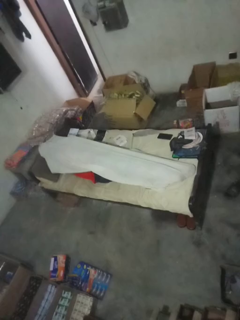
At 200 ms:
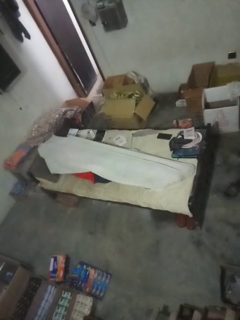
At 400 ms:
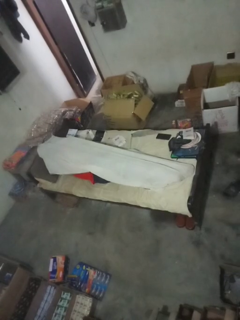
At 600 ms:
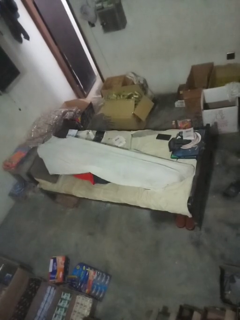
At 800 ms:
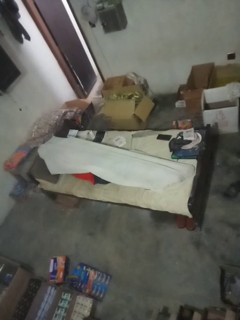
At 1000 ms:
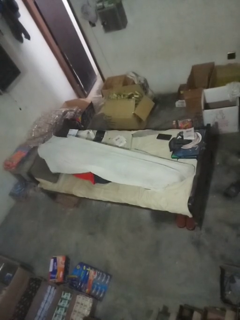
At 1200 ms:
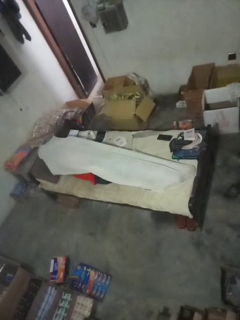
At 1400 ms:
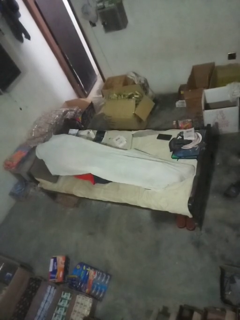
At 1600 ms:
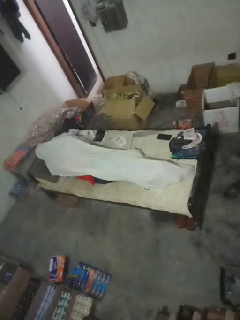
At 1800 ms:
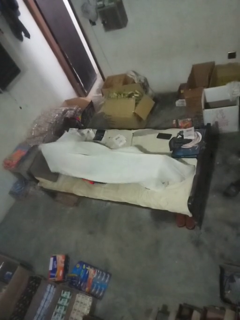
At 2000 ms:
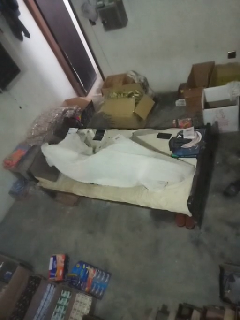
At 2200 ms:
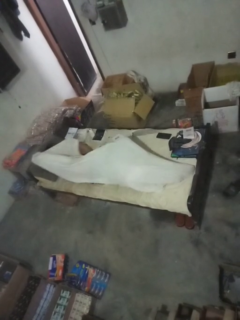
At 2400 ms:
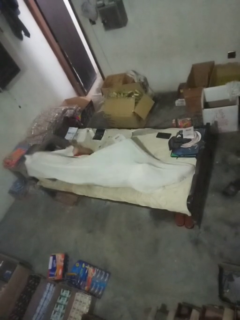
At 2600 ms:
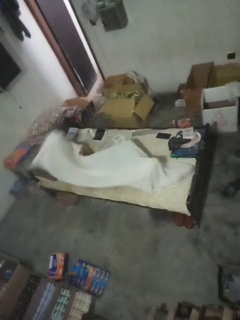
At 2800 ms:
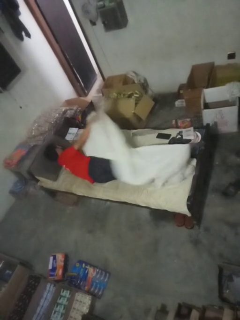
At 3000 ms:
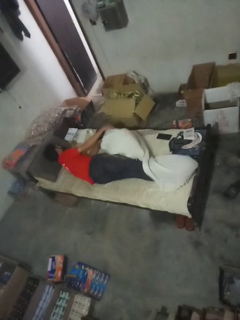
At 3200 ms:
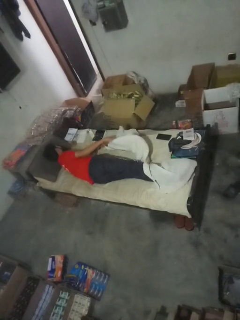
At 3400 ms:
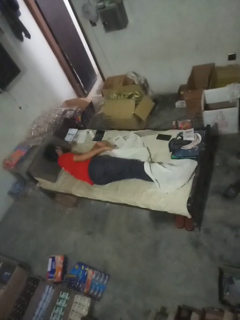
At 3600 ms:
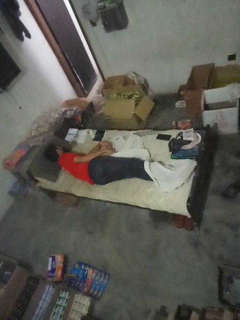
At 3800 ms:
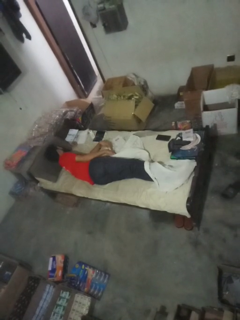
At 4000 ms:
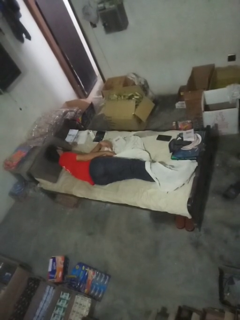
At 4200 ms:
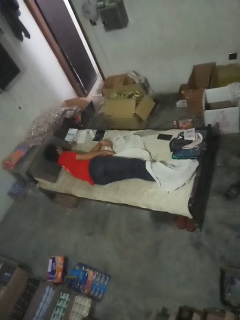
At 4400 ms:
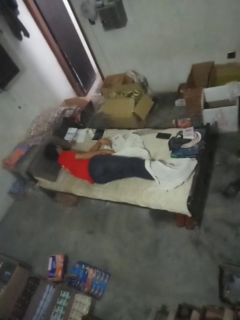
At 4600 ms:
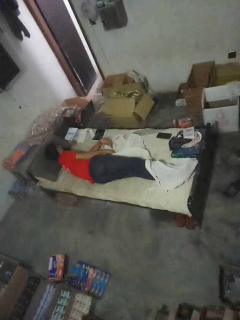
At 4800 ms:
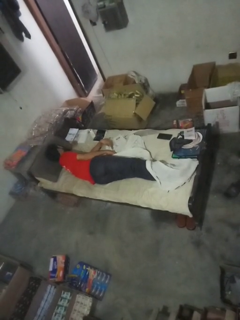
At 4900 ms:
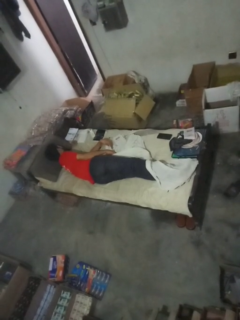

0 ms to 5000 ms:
person uncovers with bedsheets

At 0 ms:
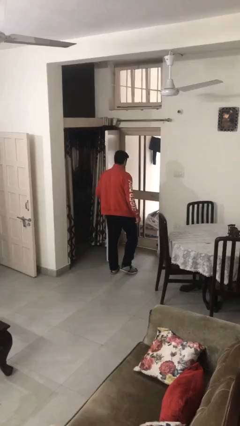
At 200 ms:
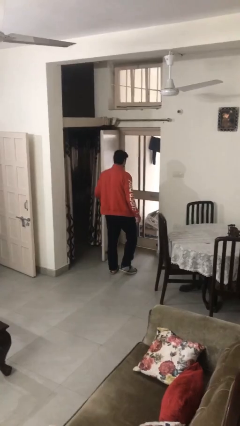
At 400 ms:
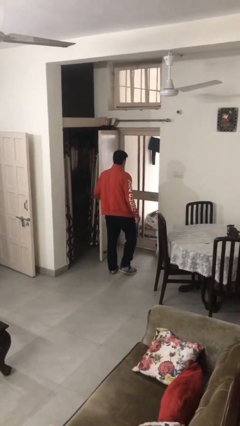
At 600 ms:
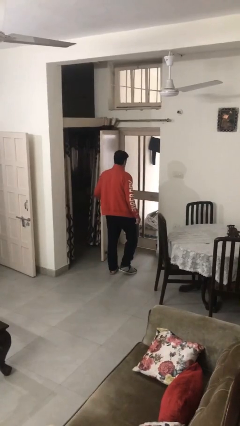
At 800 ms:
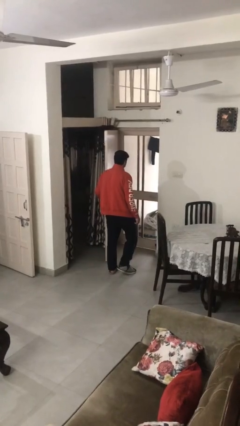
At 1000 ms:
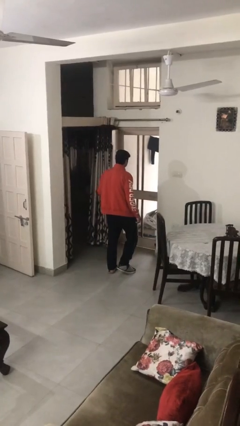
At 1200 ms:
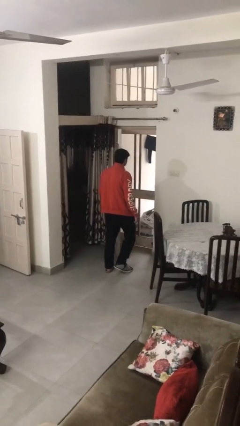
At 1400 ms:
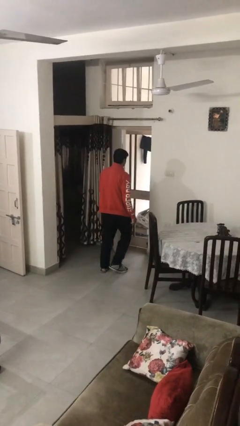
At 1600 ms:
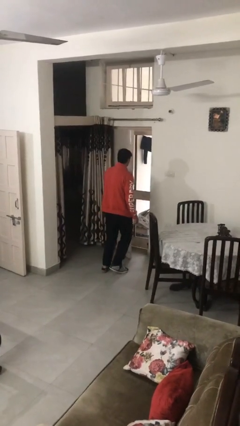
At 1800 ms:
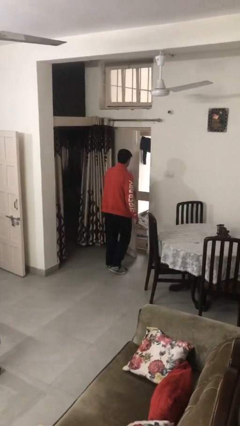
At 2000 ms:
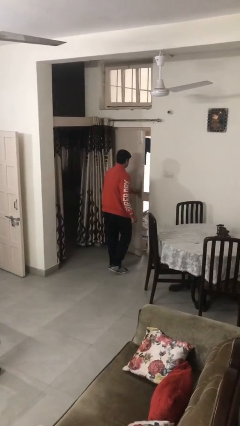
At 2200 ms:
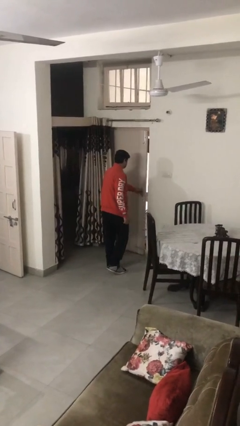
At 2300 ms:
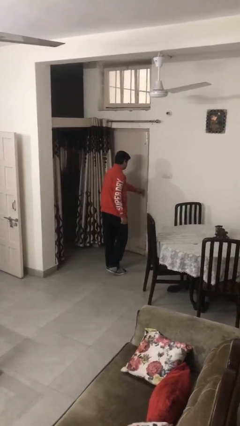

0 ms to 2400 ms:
person closes facility door

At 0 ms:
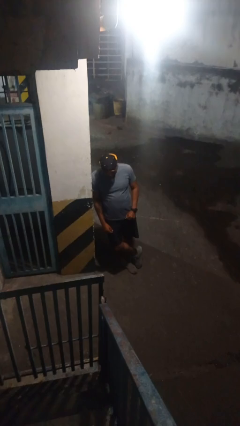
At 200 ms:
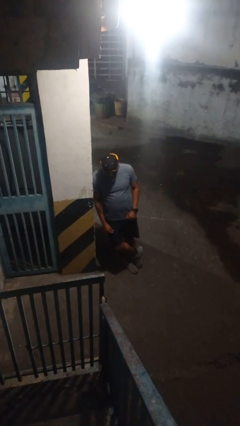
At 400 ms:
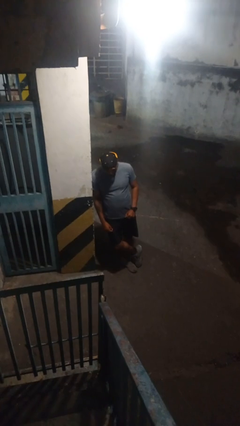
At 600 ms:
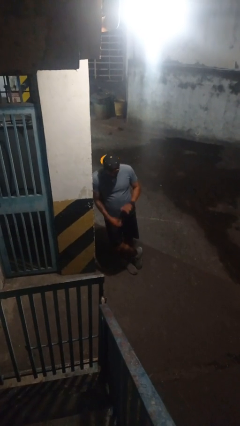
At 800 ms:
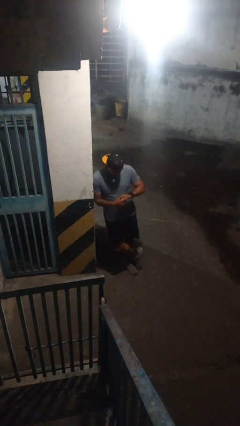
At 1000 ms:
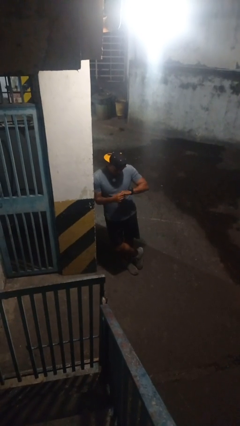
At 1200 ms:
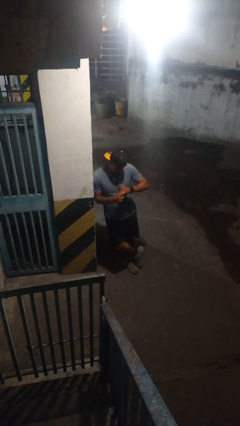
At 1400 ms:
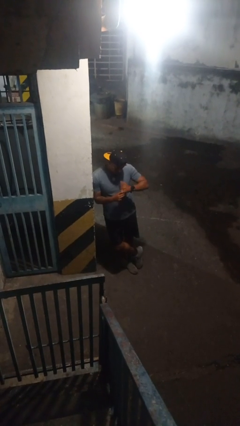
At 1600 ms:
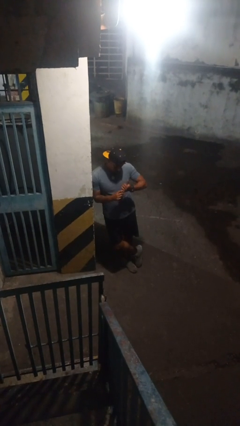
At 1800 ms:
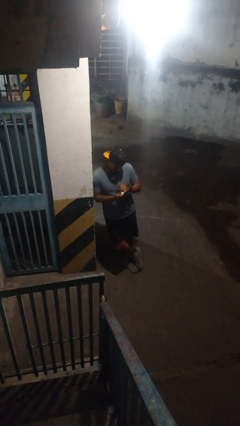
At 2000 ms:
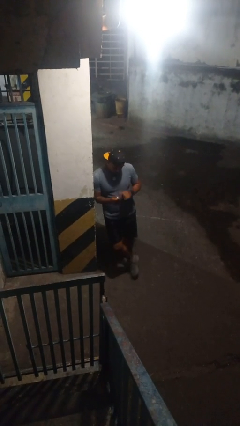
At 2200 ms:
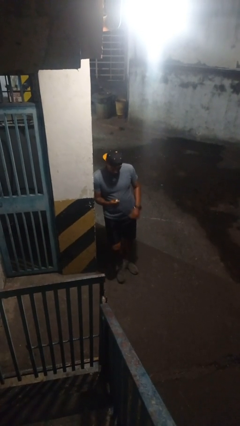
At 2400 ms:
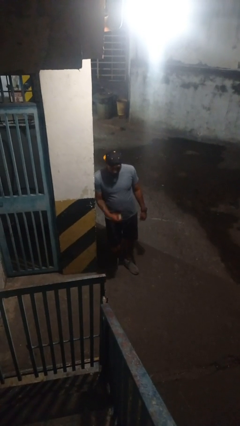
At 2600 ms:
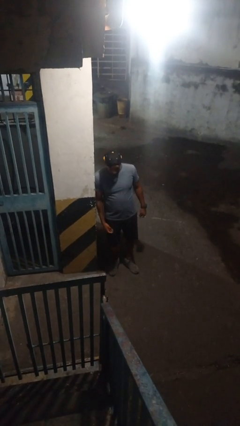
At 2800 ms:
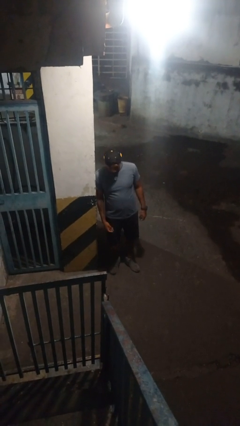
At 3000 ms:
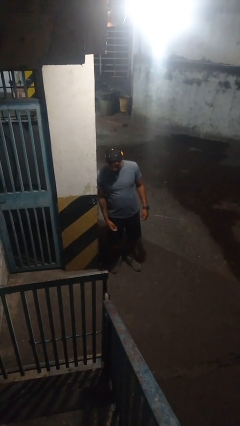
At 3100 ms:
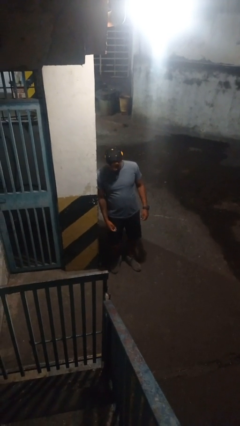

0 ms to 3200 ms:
person takes off ring

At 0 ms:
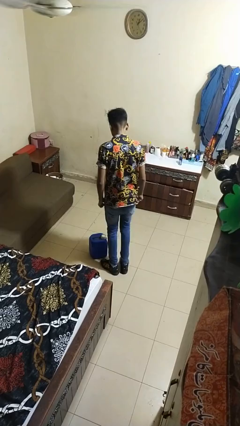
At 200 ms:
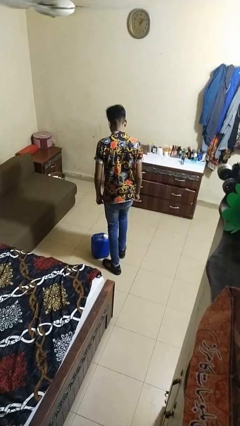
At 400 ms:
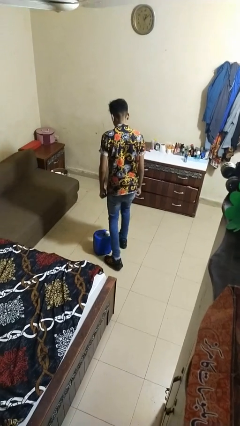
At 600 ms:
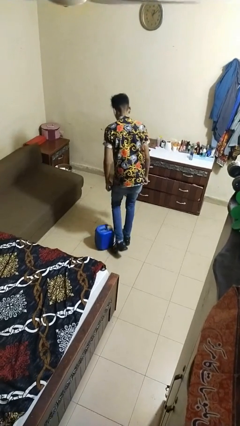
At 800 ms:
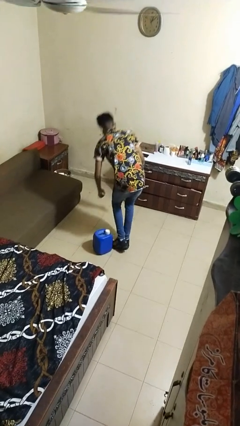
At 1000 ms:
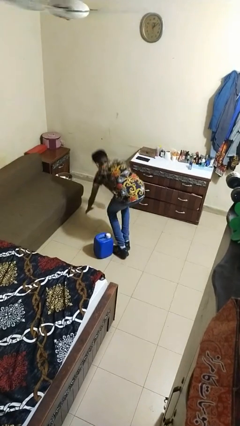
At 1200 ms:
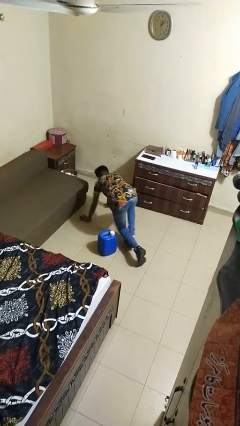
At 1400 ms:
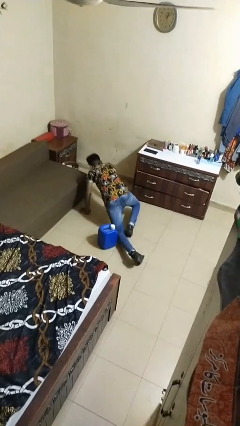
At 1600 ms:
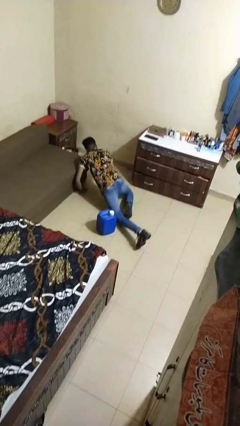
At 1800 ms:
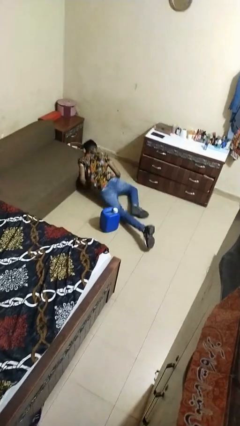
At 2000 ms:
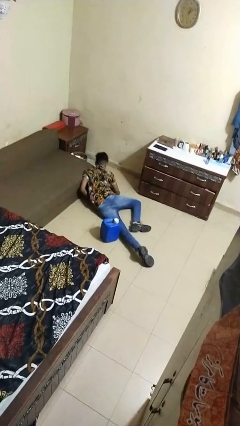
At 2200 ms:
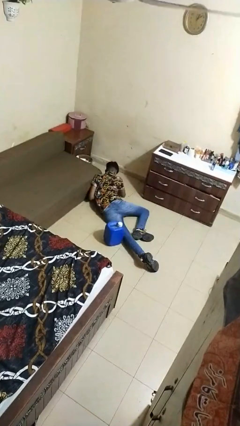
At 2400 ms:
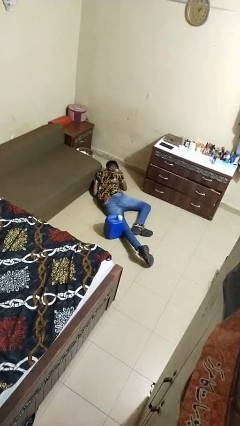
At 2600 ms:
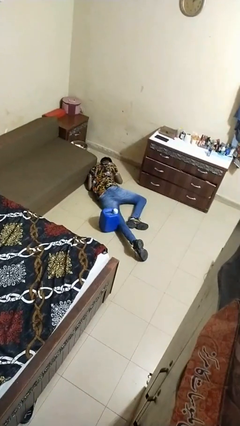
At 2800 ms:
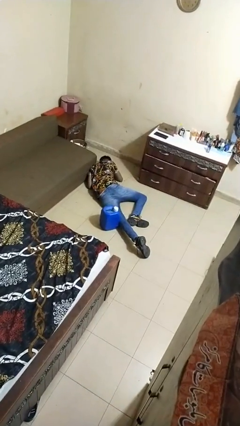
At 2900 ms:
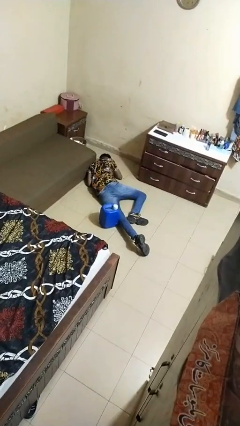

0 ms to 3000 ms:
person lies down on floor

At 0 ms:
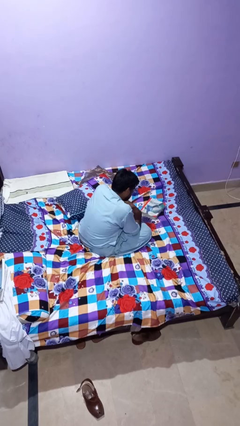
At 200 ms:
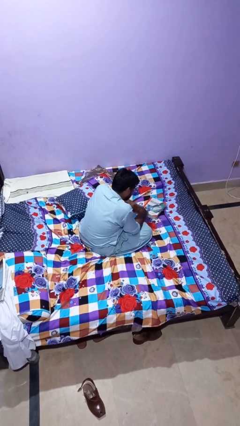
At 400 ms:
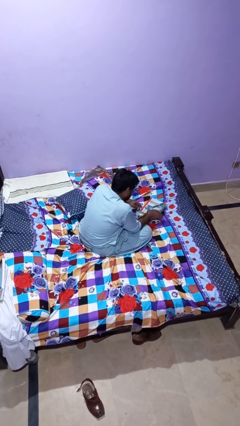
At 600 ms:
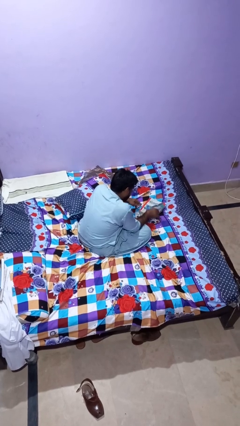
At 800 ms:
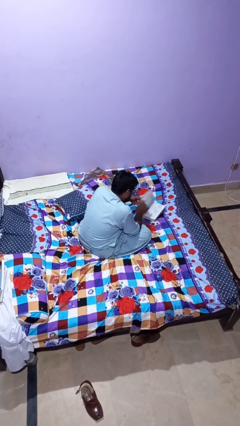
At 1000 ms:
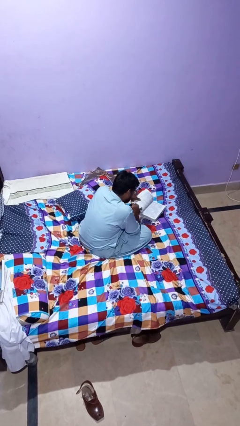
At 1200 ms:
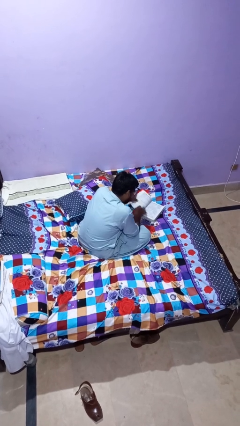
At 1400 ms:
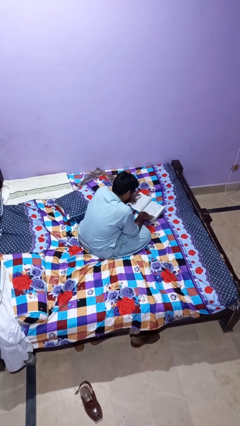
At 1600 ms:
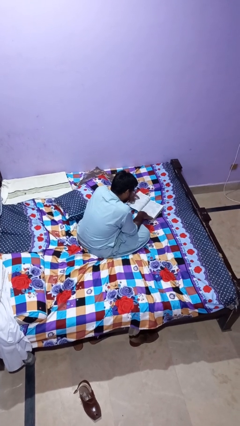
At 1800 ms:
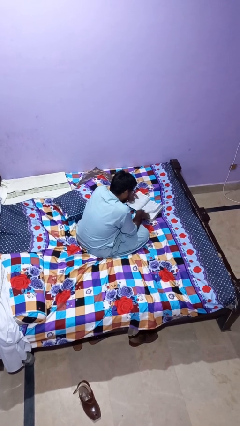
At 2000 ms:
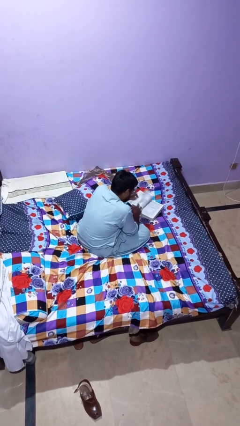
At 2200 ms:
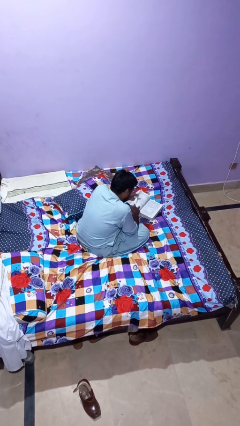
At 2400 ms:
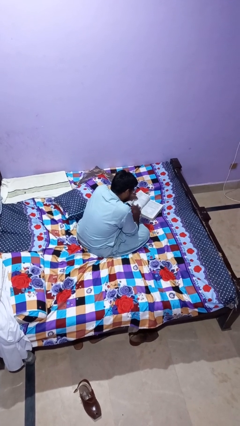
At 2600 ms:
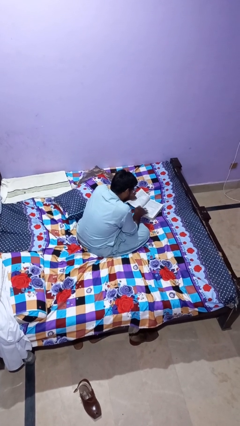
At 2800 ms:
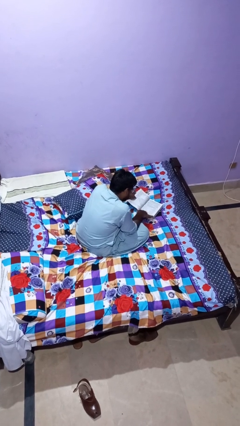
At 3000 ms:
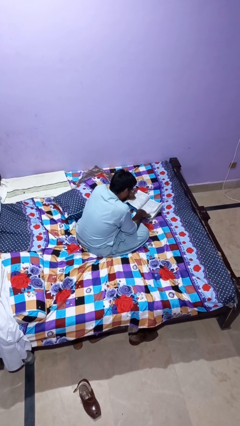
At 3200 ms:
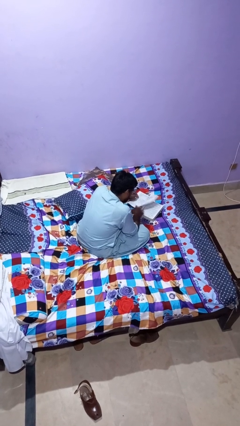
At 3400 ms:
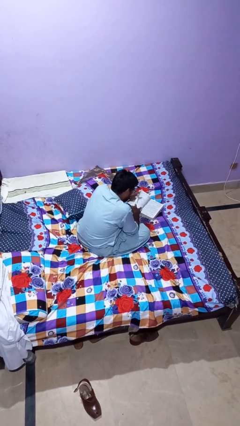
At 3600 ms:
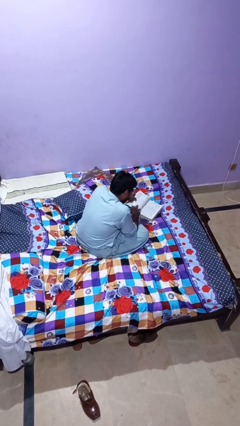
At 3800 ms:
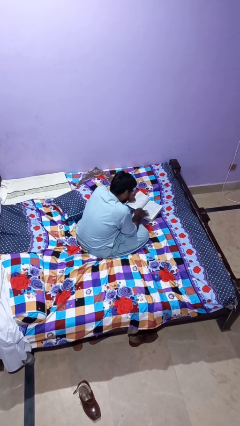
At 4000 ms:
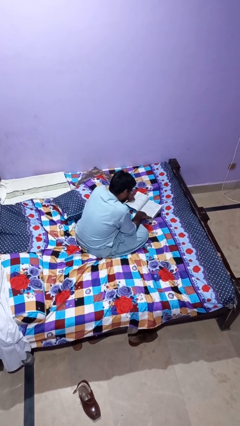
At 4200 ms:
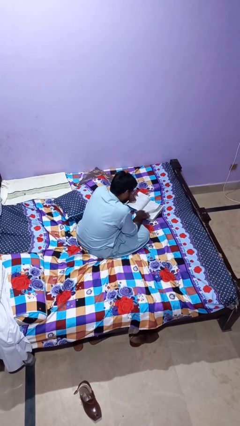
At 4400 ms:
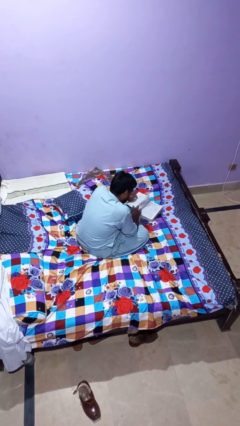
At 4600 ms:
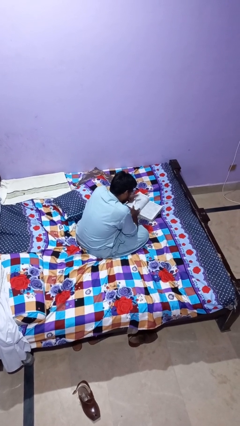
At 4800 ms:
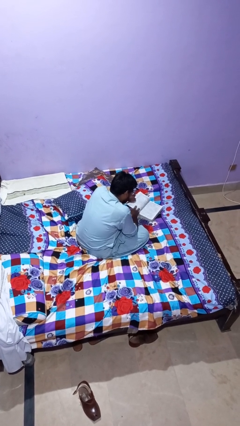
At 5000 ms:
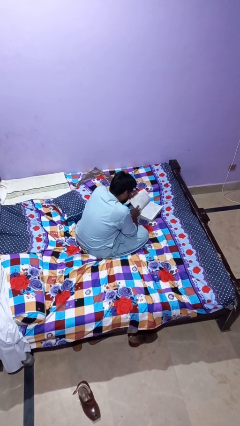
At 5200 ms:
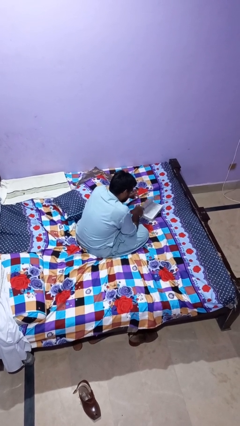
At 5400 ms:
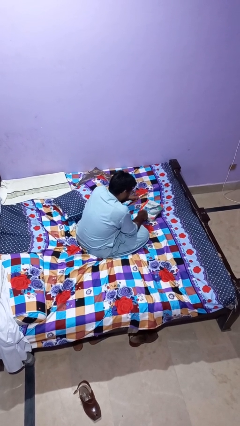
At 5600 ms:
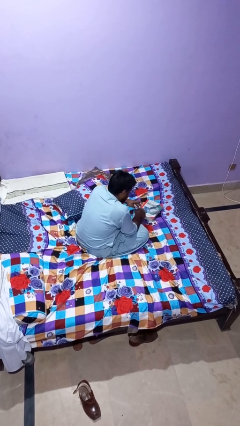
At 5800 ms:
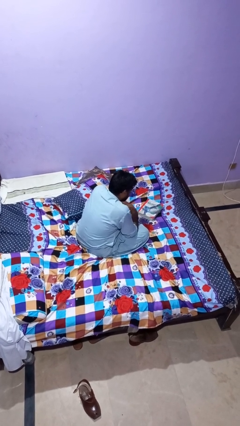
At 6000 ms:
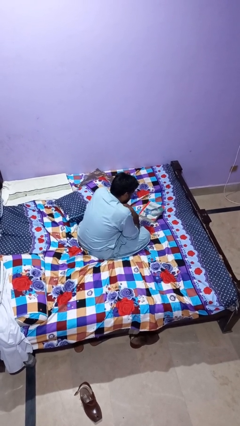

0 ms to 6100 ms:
person reads book
